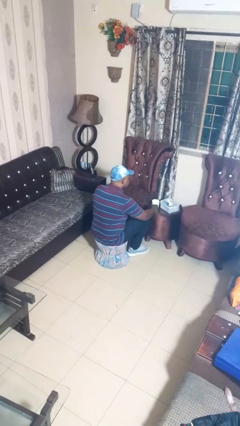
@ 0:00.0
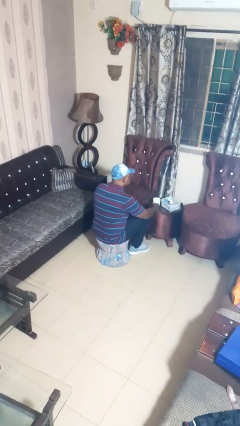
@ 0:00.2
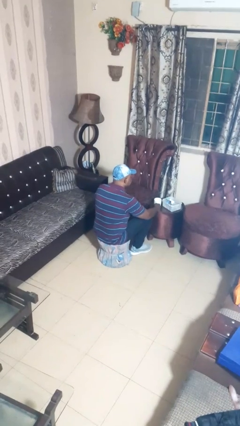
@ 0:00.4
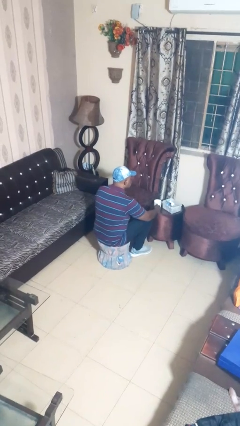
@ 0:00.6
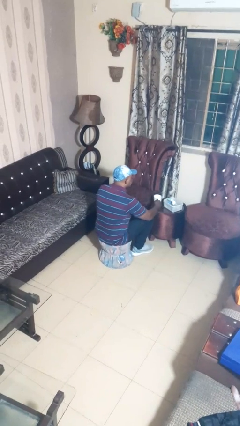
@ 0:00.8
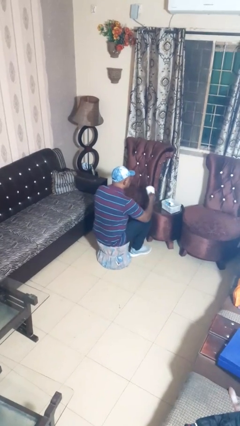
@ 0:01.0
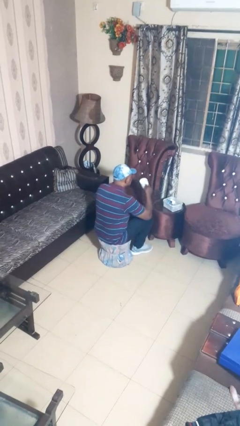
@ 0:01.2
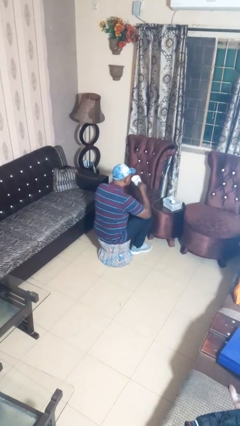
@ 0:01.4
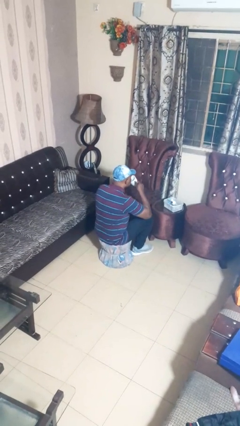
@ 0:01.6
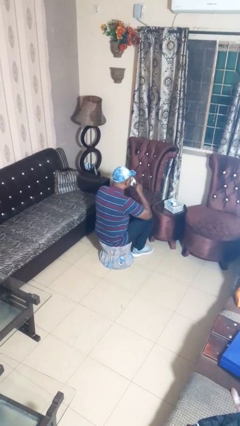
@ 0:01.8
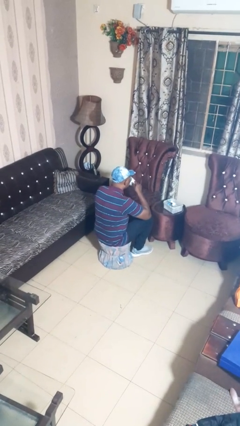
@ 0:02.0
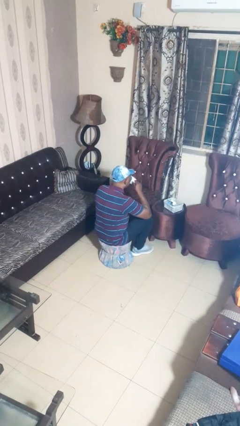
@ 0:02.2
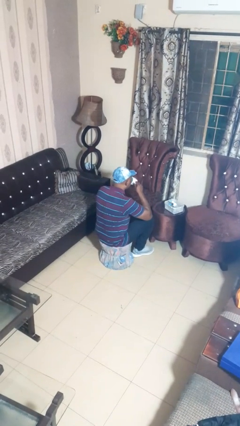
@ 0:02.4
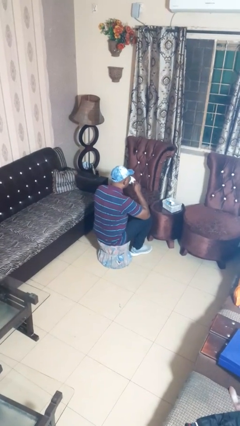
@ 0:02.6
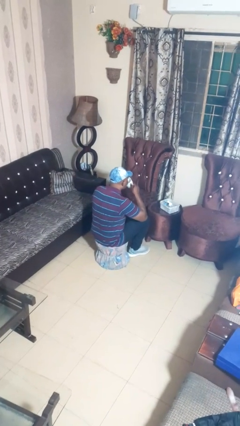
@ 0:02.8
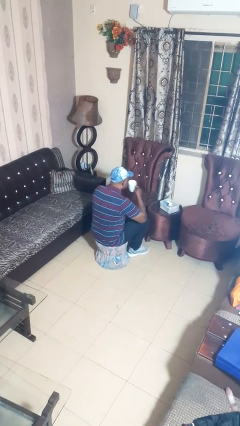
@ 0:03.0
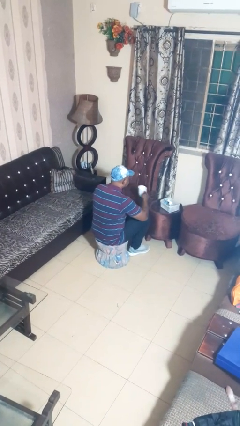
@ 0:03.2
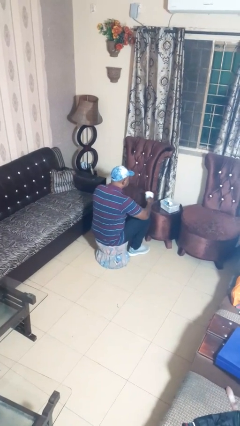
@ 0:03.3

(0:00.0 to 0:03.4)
person drinks from cup

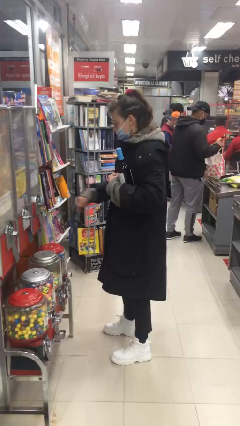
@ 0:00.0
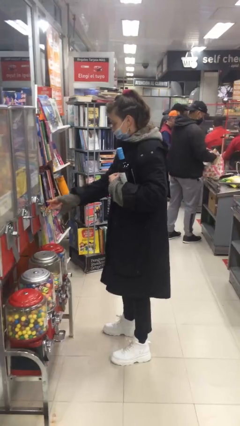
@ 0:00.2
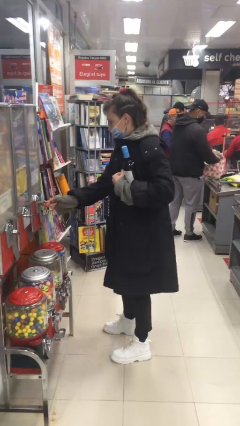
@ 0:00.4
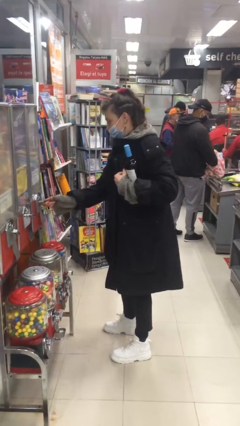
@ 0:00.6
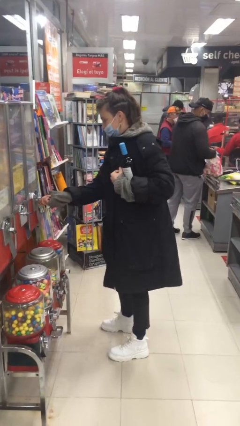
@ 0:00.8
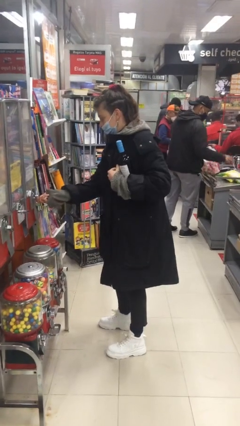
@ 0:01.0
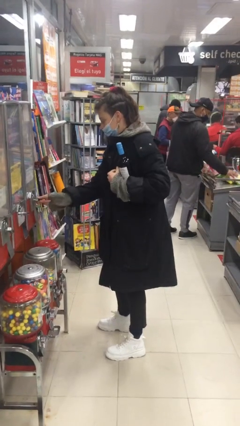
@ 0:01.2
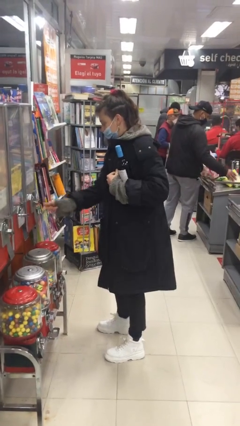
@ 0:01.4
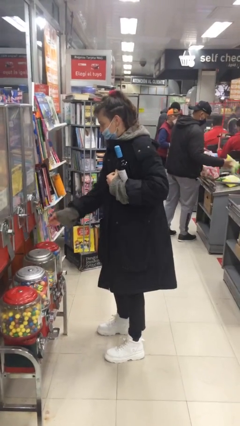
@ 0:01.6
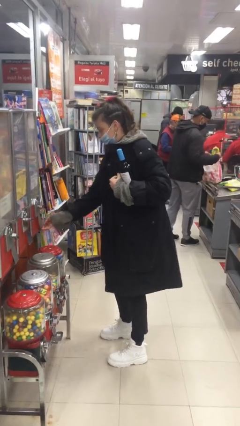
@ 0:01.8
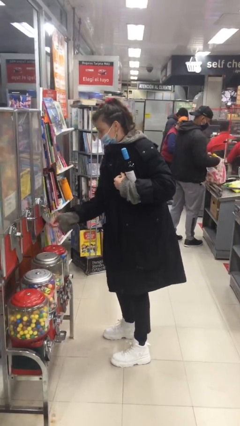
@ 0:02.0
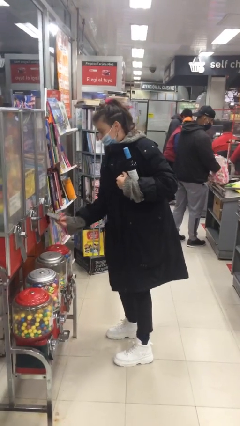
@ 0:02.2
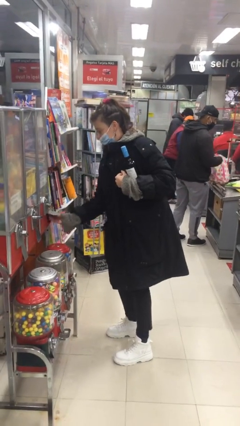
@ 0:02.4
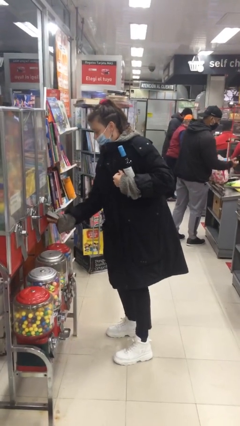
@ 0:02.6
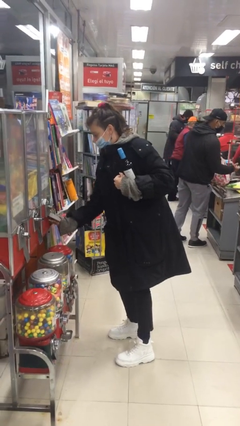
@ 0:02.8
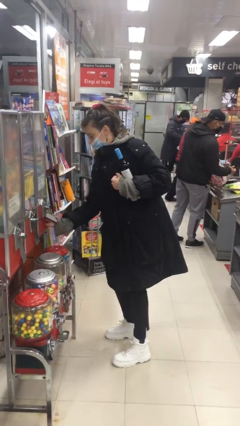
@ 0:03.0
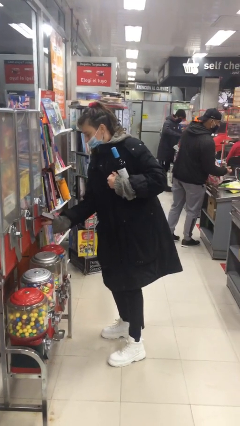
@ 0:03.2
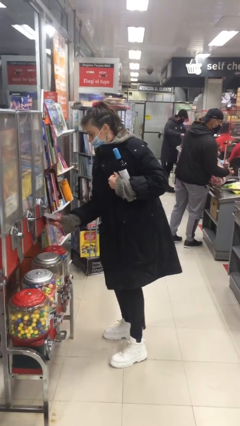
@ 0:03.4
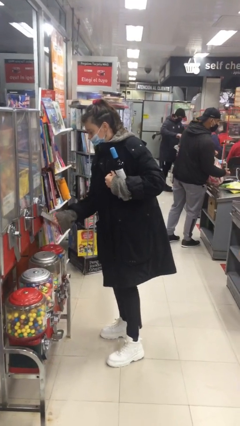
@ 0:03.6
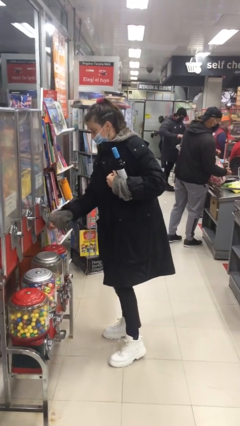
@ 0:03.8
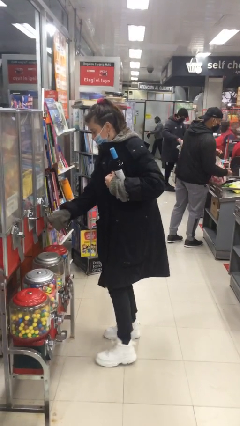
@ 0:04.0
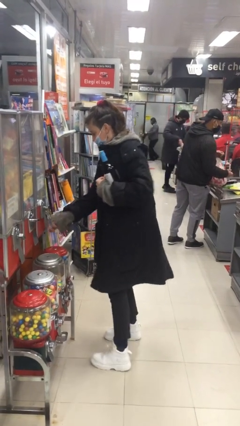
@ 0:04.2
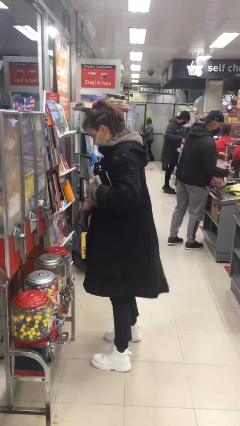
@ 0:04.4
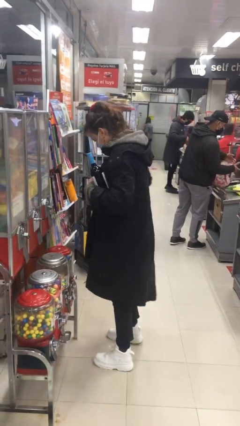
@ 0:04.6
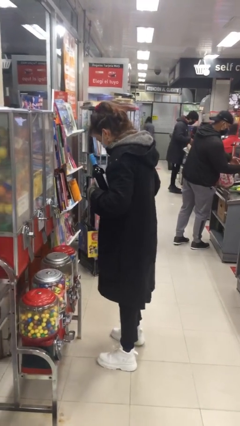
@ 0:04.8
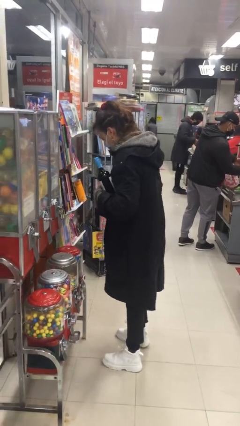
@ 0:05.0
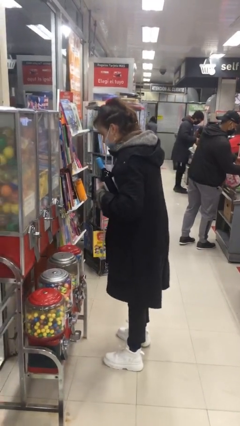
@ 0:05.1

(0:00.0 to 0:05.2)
person purchases from machine

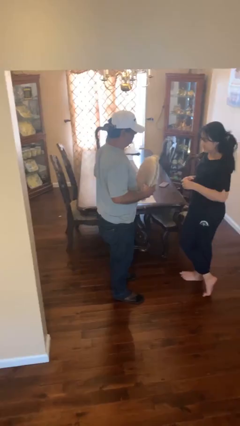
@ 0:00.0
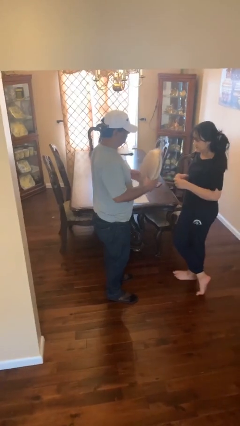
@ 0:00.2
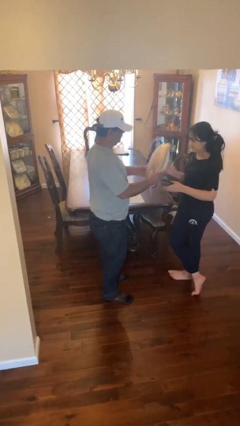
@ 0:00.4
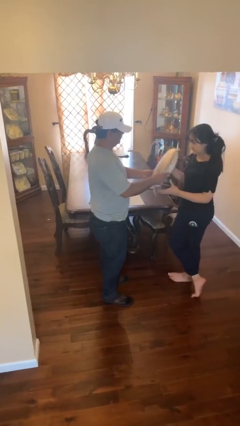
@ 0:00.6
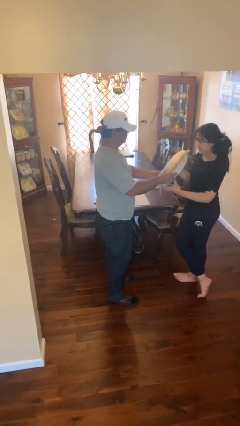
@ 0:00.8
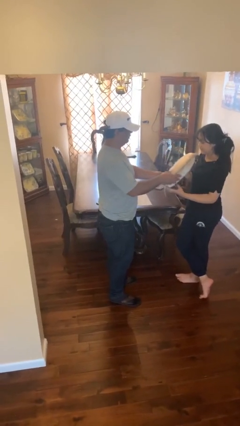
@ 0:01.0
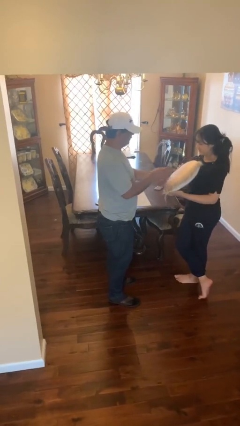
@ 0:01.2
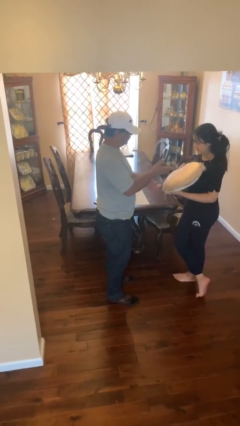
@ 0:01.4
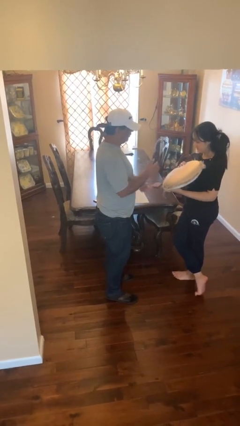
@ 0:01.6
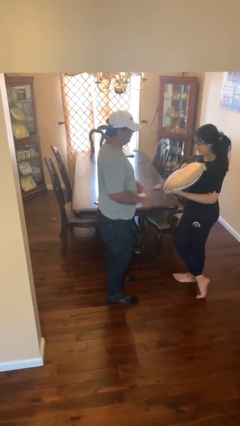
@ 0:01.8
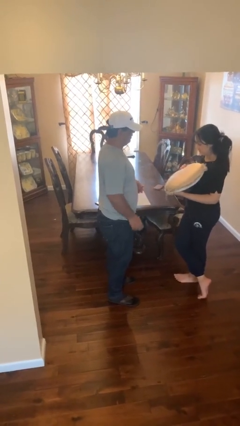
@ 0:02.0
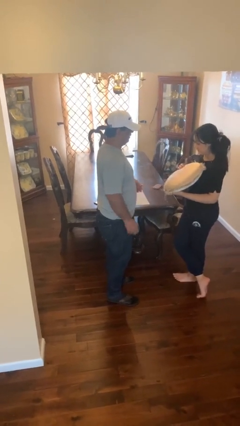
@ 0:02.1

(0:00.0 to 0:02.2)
person transfers object to person

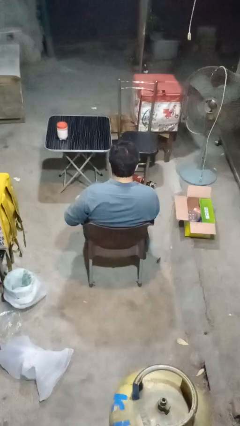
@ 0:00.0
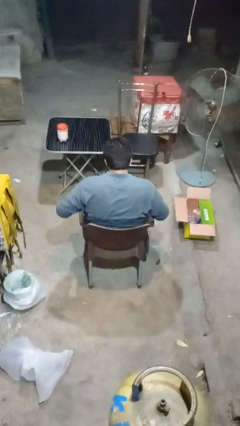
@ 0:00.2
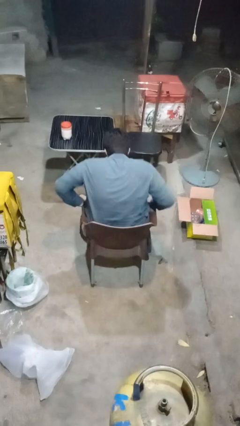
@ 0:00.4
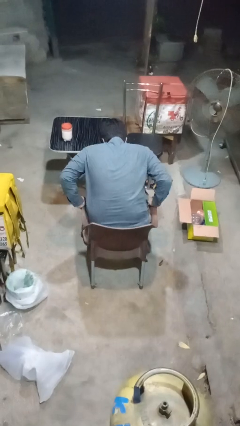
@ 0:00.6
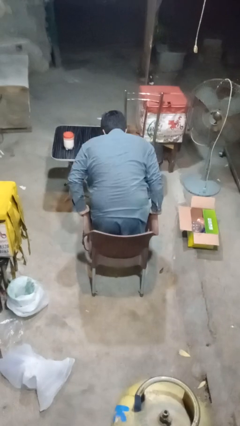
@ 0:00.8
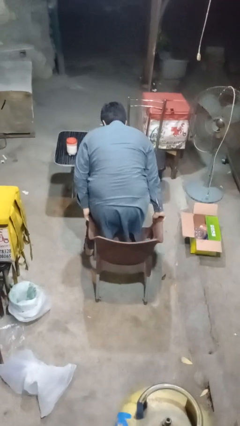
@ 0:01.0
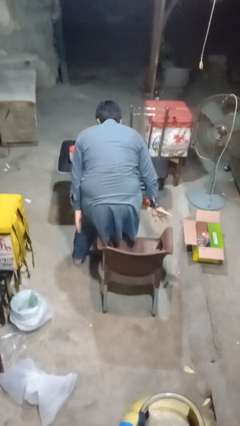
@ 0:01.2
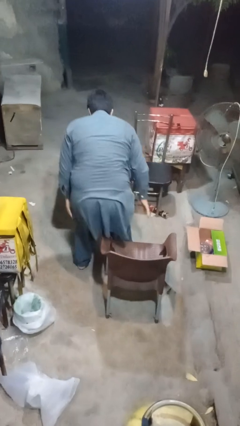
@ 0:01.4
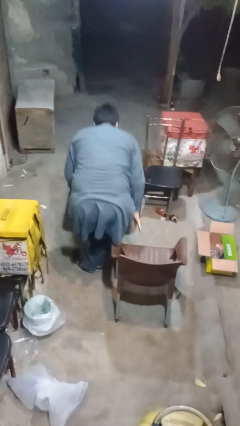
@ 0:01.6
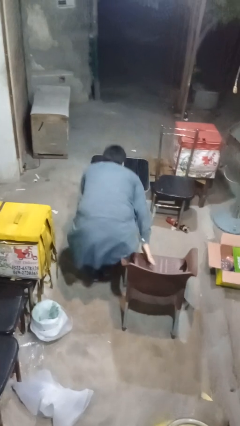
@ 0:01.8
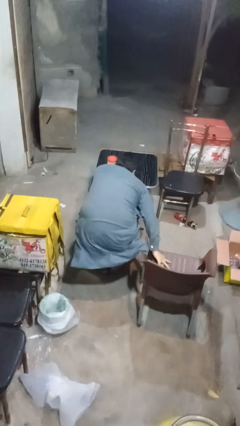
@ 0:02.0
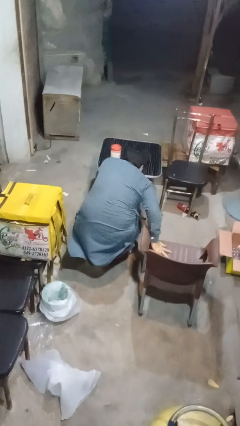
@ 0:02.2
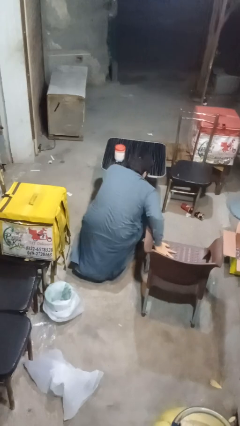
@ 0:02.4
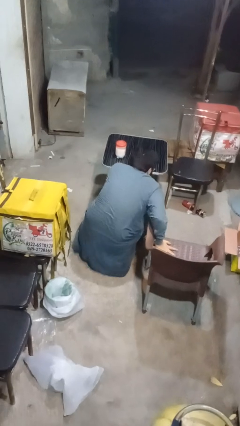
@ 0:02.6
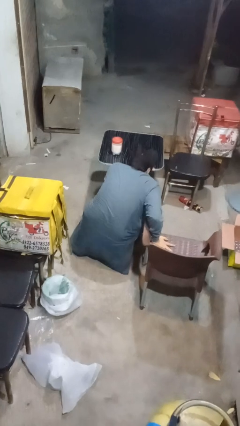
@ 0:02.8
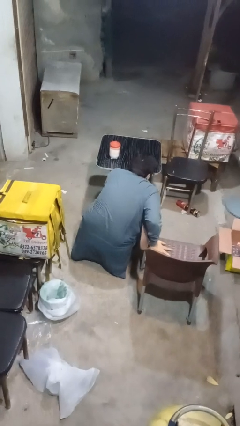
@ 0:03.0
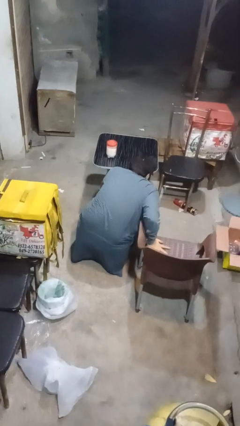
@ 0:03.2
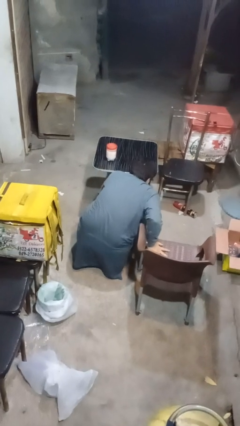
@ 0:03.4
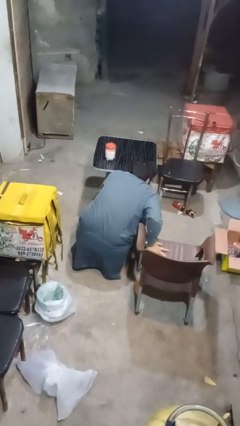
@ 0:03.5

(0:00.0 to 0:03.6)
person falls from chair

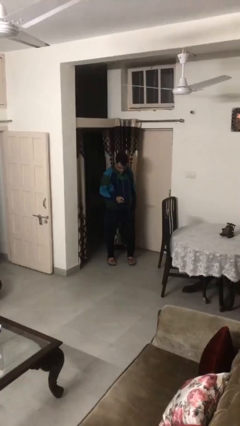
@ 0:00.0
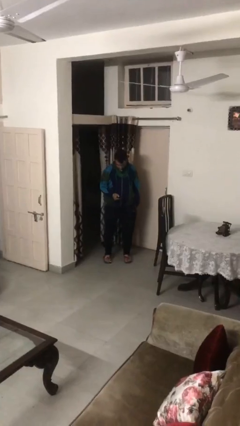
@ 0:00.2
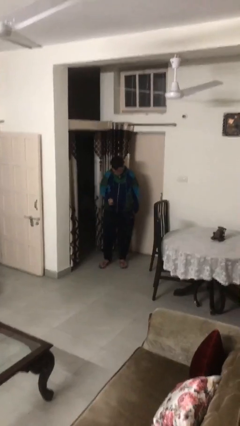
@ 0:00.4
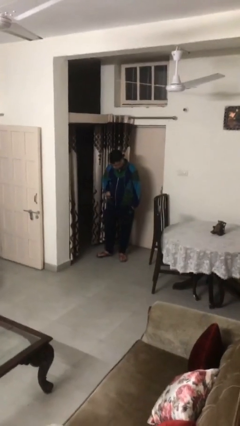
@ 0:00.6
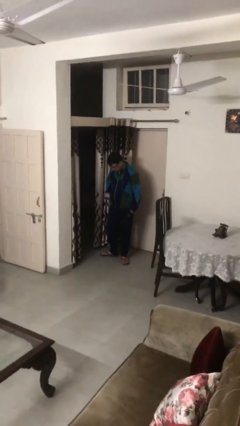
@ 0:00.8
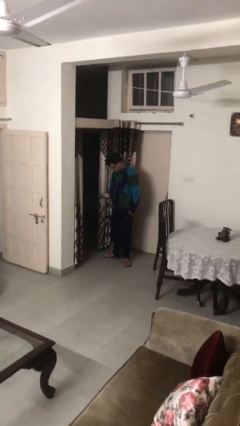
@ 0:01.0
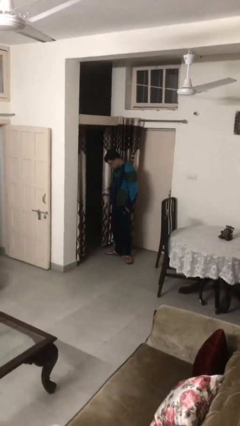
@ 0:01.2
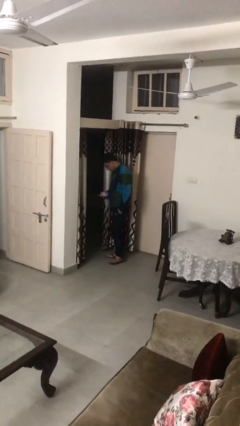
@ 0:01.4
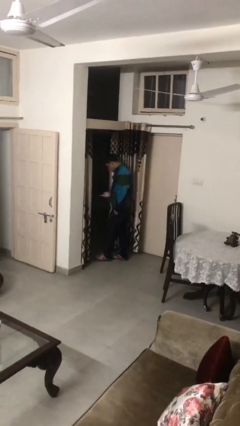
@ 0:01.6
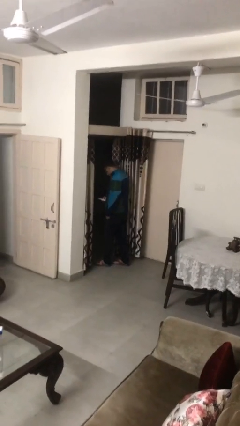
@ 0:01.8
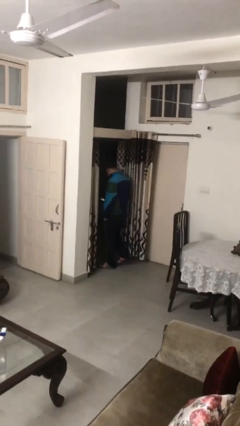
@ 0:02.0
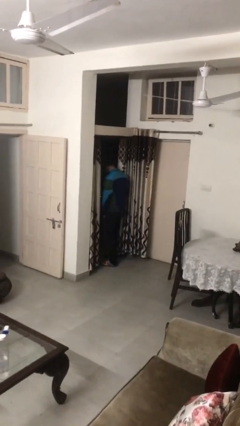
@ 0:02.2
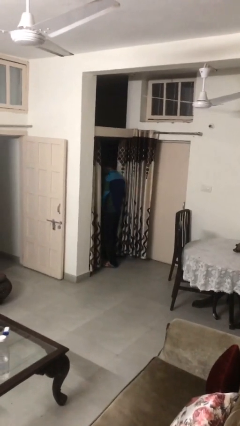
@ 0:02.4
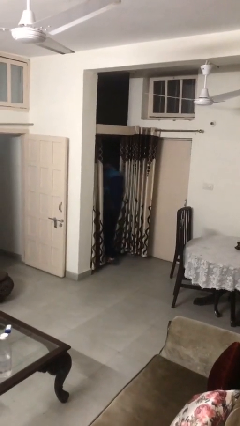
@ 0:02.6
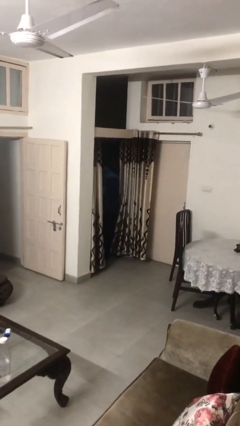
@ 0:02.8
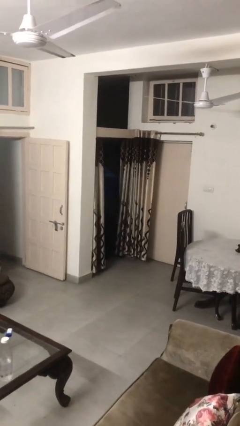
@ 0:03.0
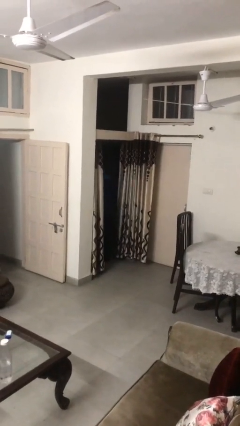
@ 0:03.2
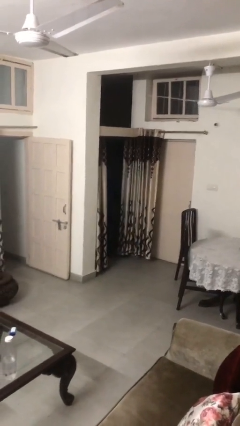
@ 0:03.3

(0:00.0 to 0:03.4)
person exits scene through structure
